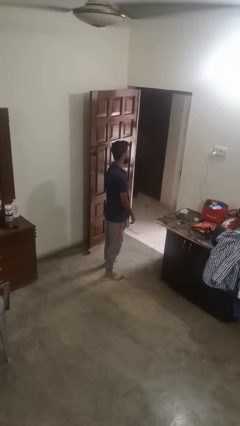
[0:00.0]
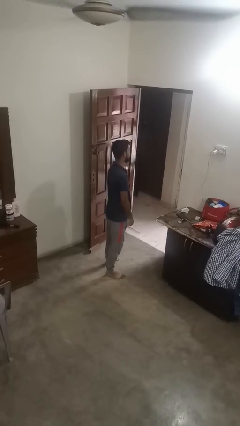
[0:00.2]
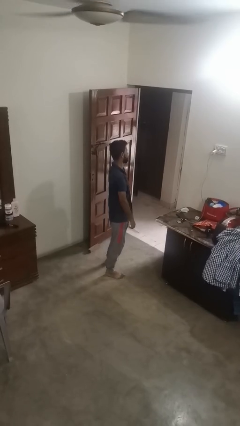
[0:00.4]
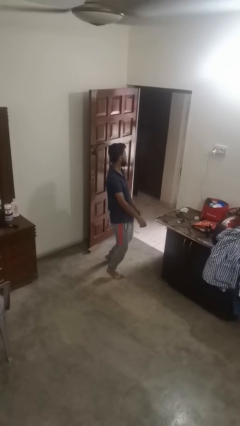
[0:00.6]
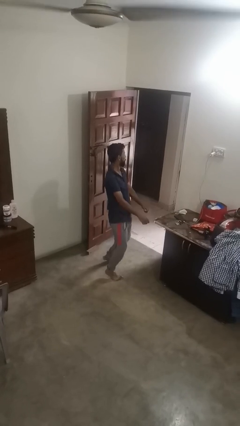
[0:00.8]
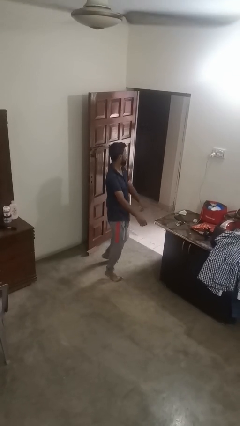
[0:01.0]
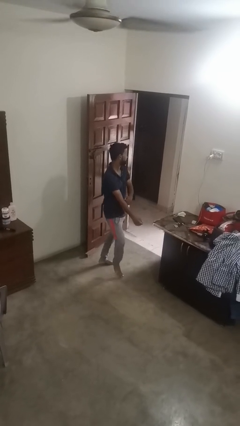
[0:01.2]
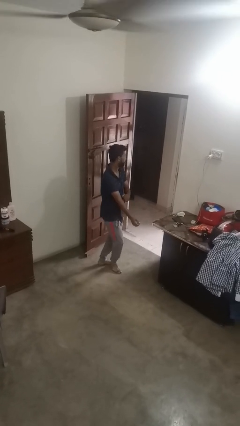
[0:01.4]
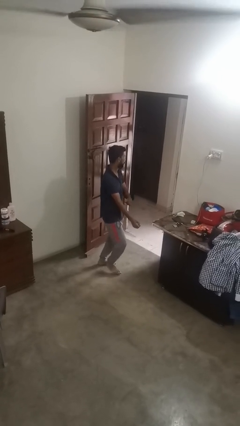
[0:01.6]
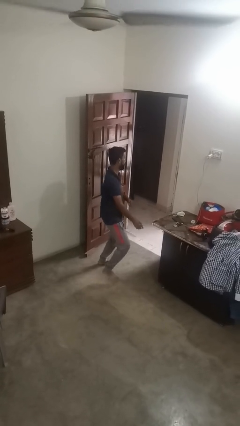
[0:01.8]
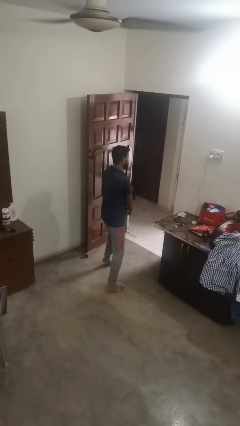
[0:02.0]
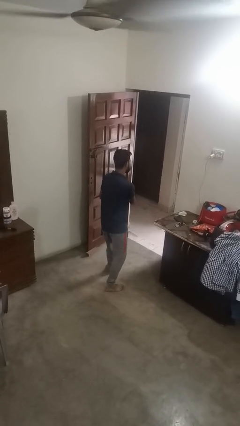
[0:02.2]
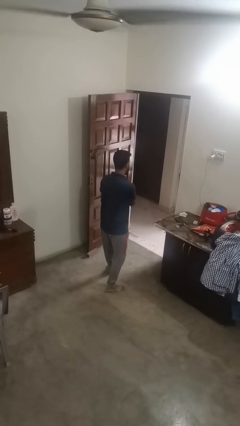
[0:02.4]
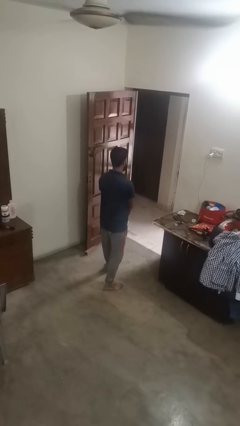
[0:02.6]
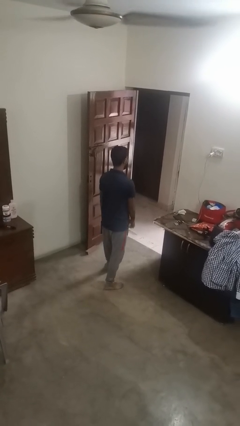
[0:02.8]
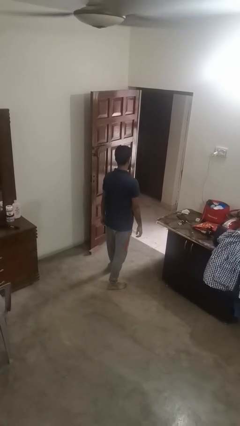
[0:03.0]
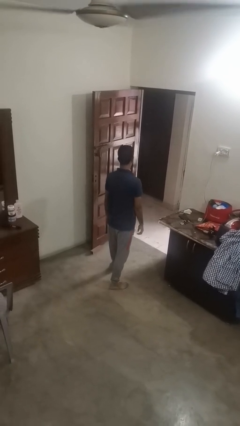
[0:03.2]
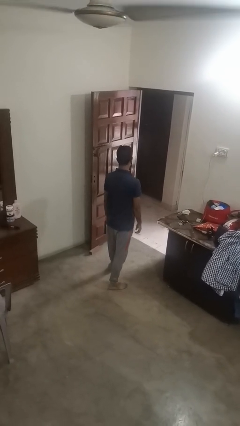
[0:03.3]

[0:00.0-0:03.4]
person dances in place

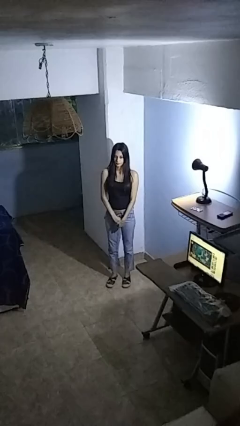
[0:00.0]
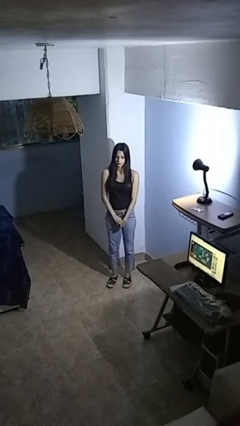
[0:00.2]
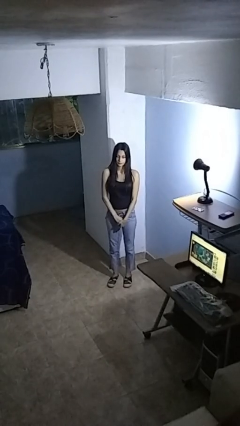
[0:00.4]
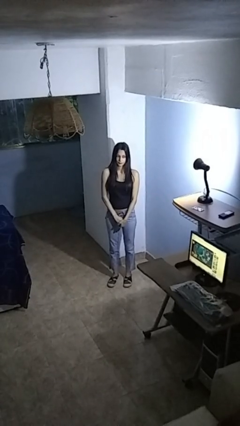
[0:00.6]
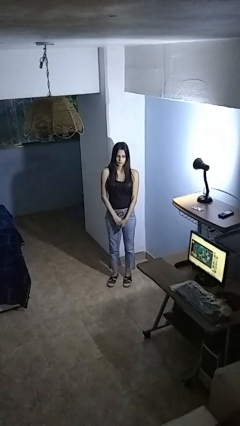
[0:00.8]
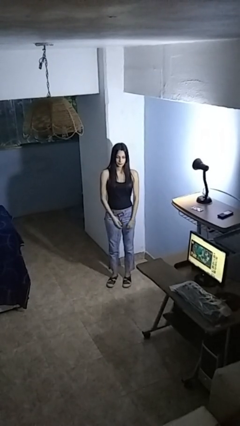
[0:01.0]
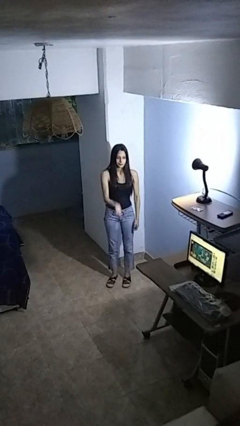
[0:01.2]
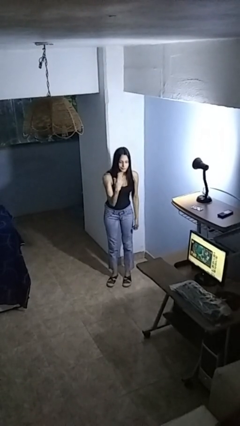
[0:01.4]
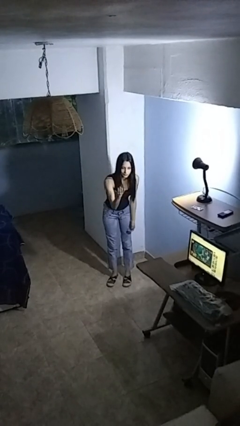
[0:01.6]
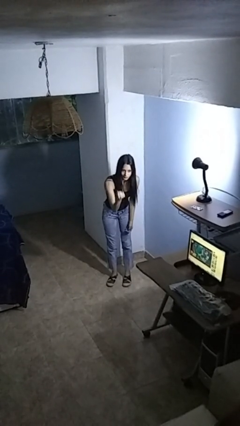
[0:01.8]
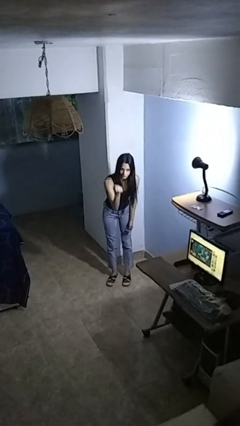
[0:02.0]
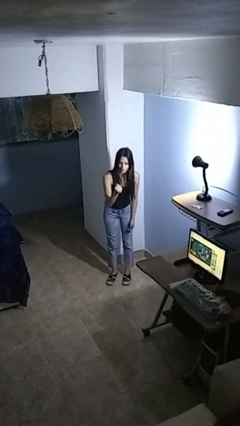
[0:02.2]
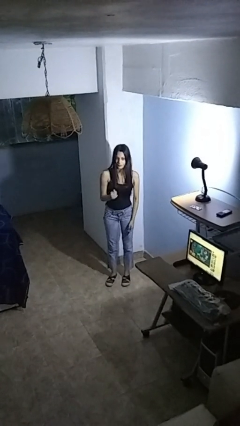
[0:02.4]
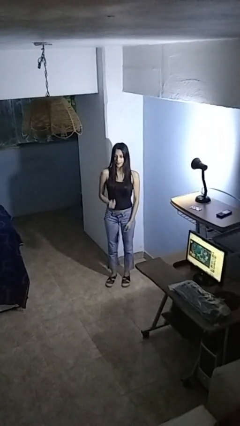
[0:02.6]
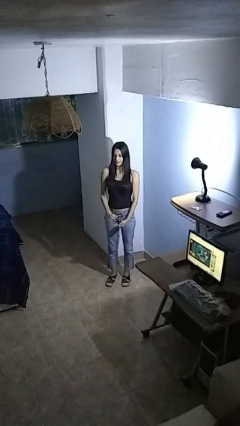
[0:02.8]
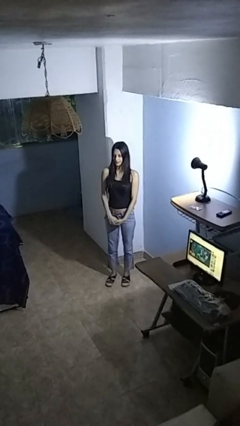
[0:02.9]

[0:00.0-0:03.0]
person gestures come here

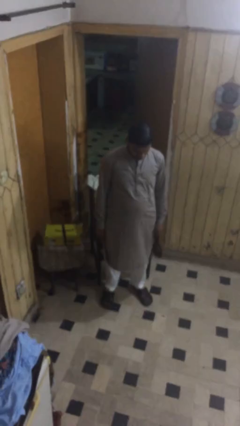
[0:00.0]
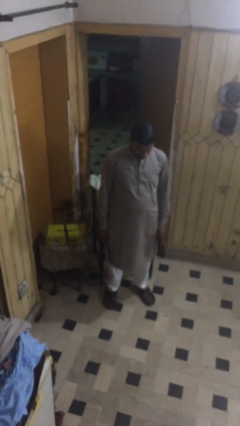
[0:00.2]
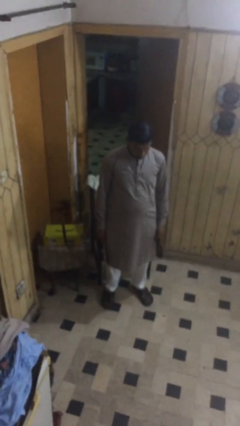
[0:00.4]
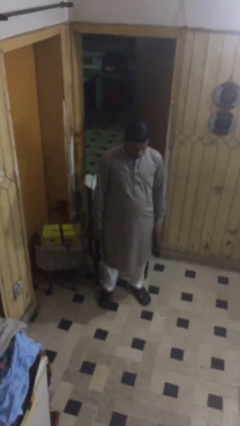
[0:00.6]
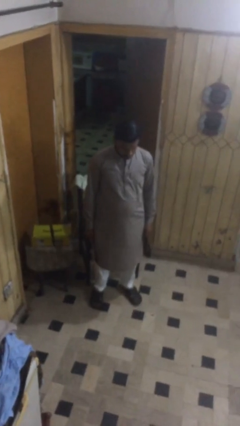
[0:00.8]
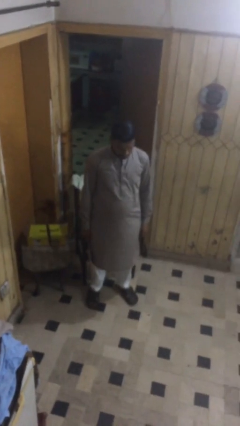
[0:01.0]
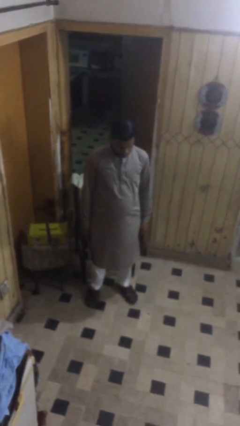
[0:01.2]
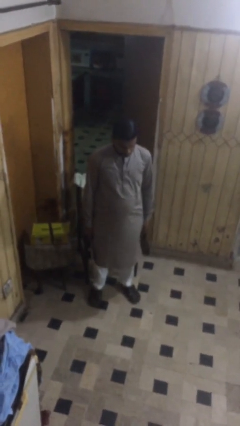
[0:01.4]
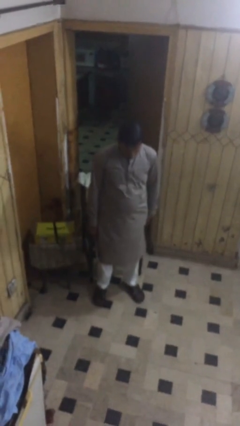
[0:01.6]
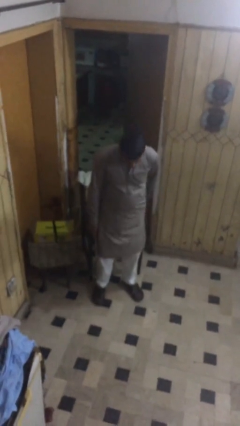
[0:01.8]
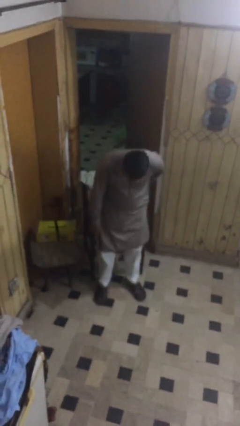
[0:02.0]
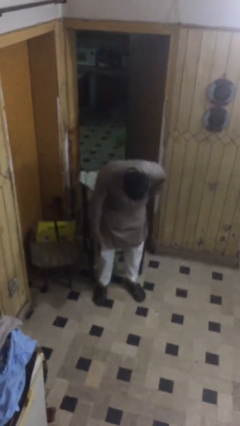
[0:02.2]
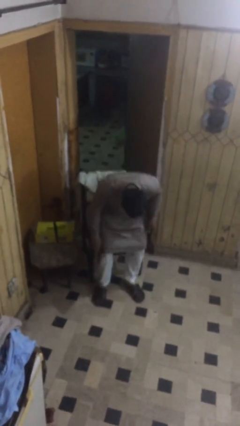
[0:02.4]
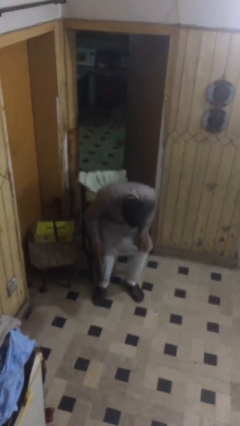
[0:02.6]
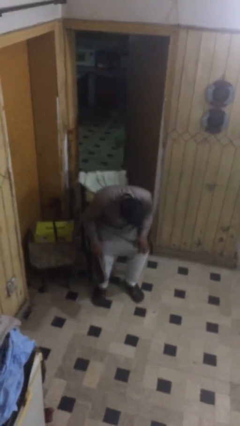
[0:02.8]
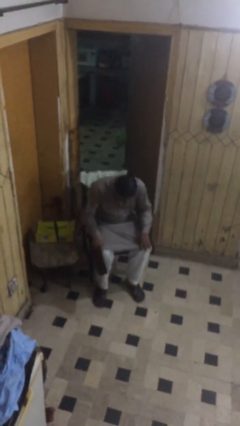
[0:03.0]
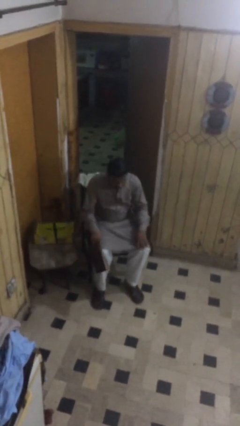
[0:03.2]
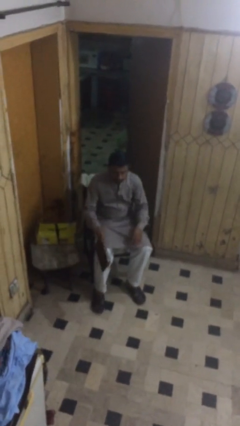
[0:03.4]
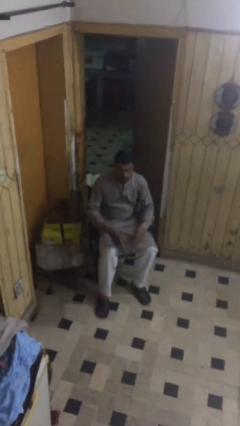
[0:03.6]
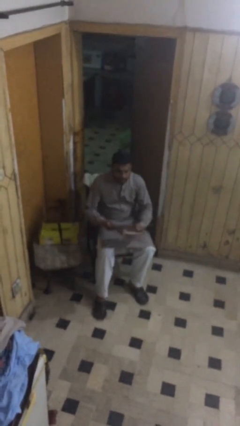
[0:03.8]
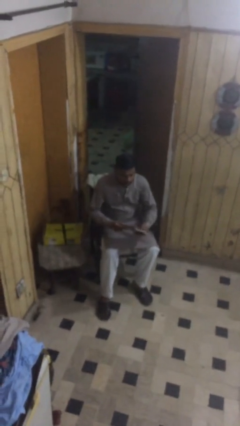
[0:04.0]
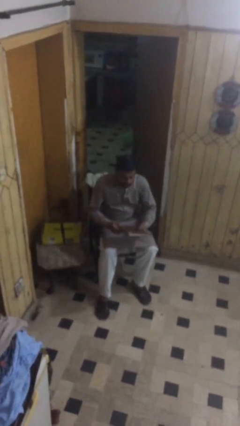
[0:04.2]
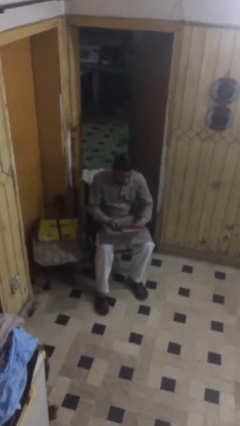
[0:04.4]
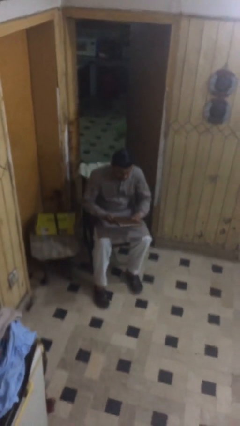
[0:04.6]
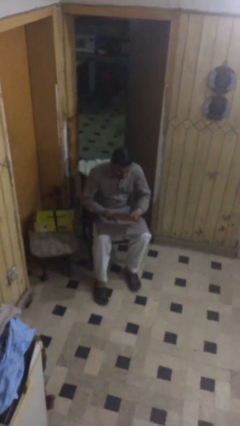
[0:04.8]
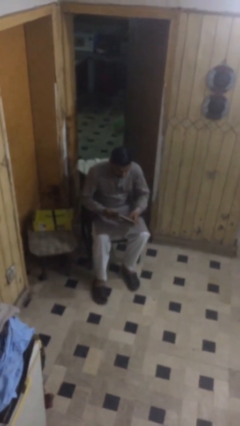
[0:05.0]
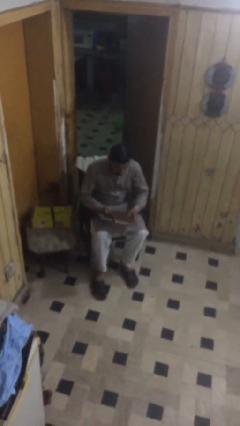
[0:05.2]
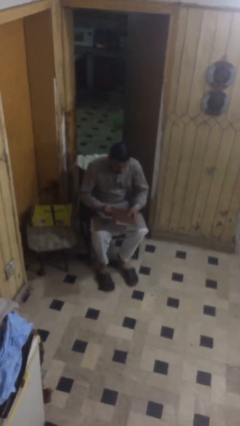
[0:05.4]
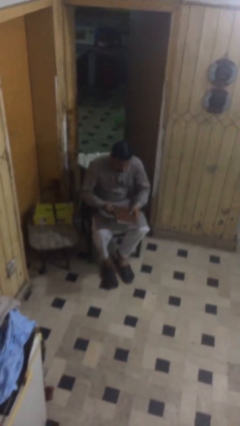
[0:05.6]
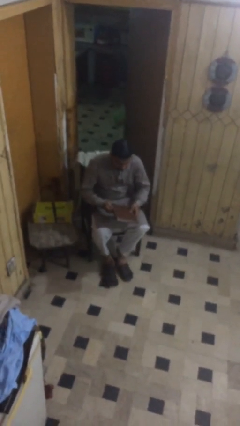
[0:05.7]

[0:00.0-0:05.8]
person sits down

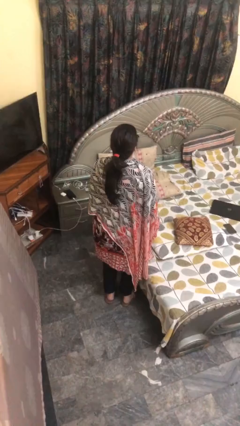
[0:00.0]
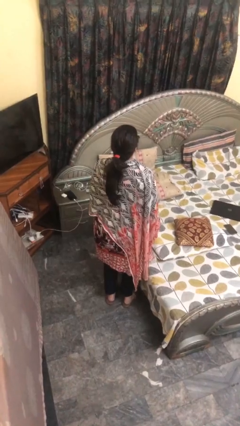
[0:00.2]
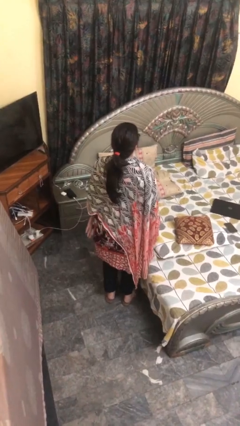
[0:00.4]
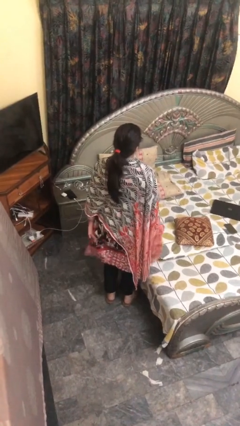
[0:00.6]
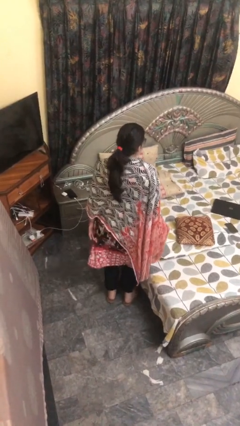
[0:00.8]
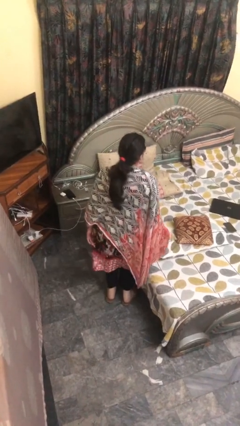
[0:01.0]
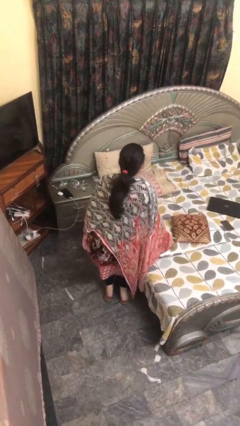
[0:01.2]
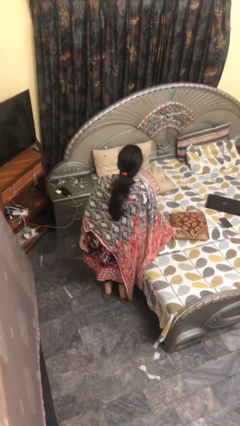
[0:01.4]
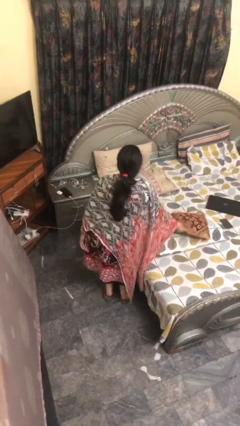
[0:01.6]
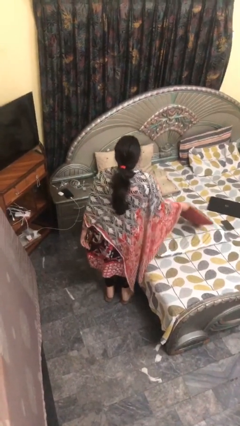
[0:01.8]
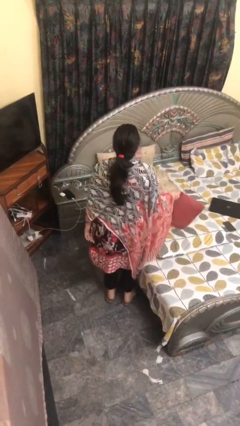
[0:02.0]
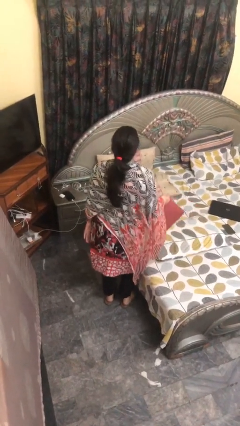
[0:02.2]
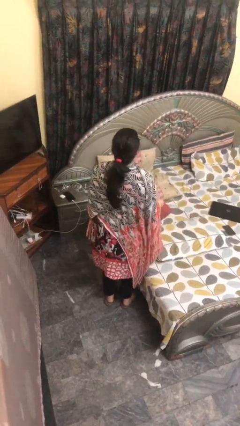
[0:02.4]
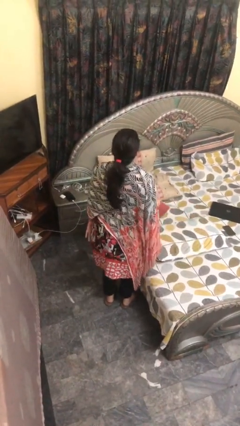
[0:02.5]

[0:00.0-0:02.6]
person picks up object from bed

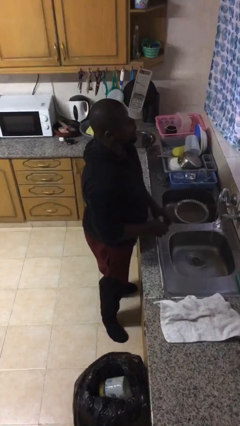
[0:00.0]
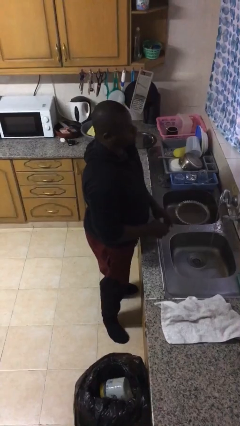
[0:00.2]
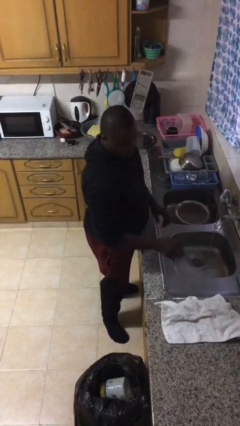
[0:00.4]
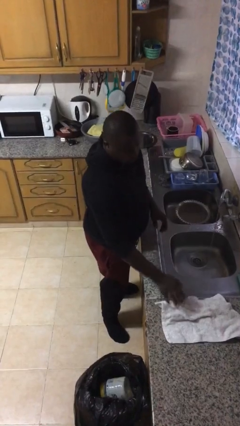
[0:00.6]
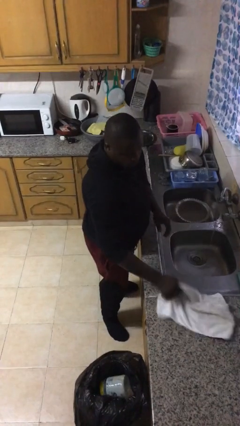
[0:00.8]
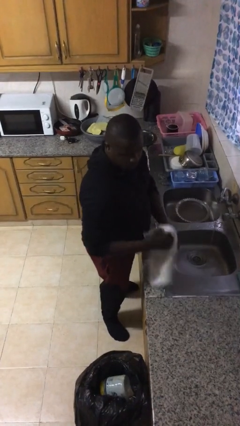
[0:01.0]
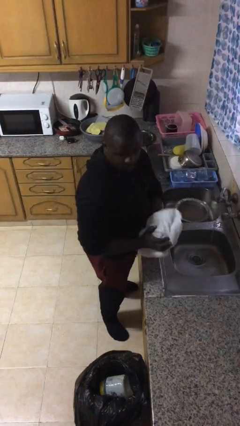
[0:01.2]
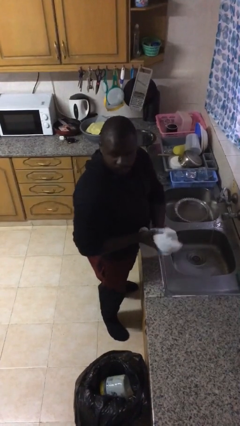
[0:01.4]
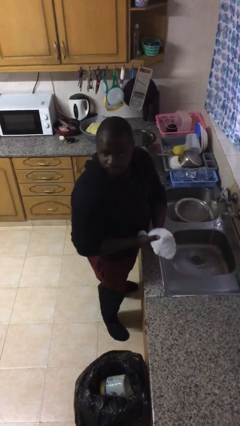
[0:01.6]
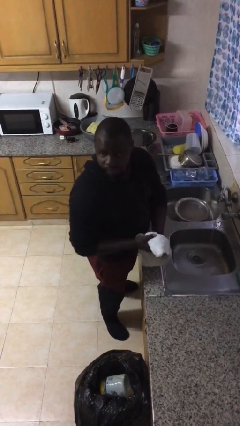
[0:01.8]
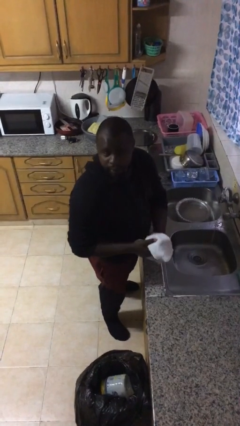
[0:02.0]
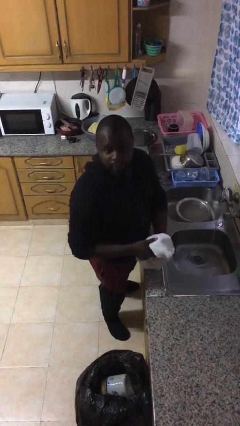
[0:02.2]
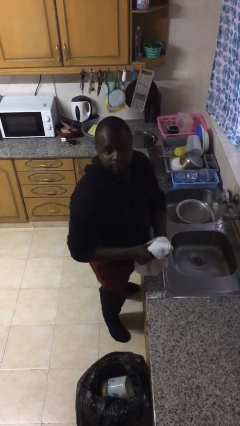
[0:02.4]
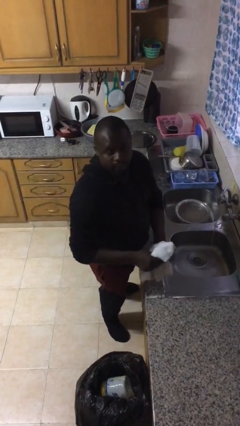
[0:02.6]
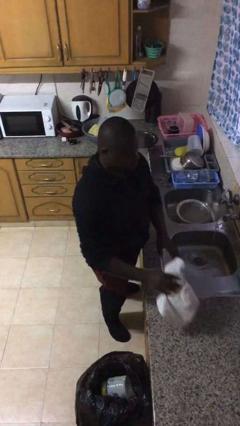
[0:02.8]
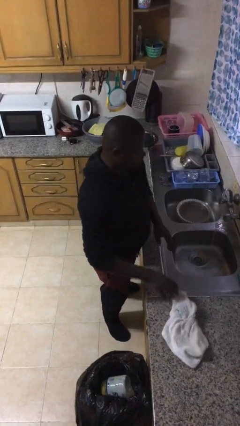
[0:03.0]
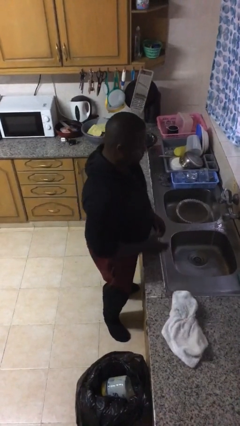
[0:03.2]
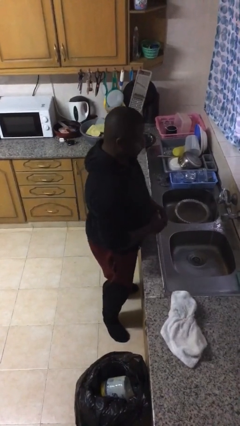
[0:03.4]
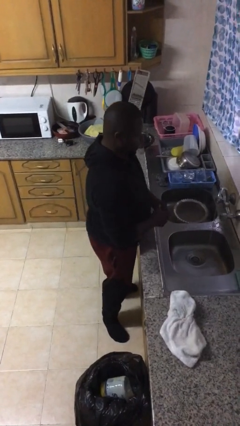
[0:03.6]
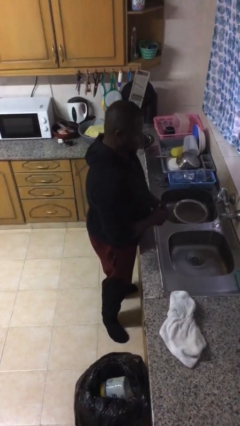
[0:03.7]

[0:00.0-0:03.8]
person dries hands with towel
